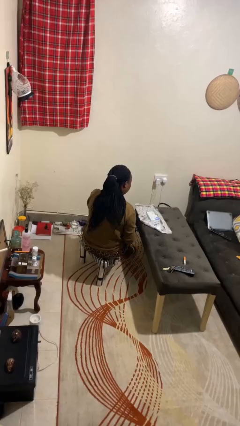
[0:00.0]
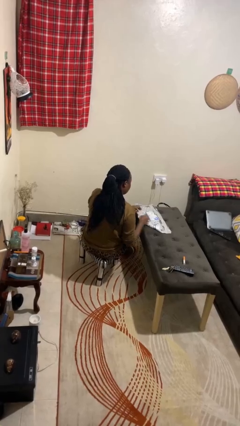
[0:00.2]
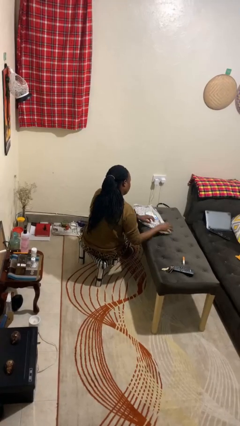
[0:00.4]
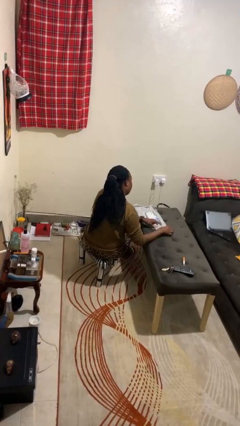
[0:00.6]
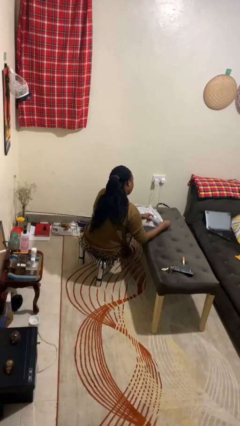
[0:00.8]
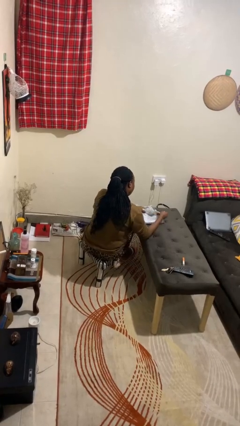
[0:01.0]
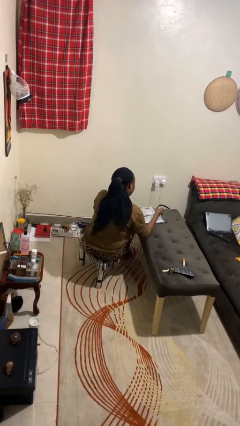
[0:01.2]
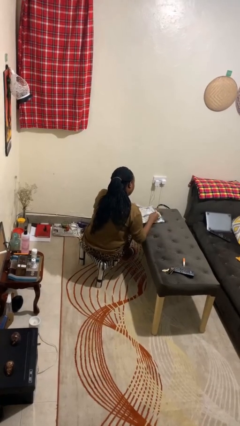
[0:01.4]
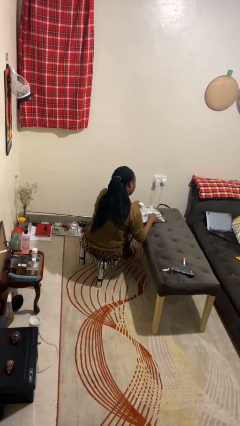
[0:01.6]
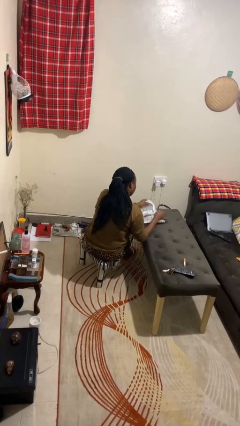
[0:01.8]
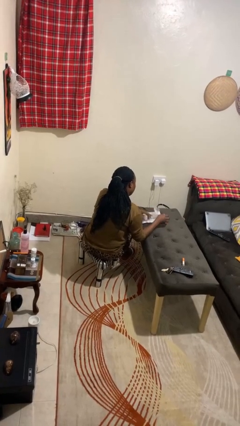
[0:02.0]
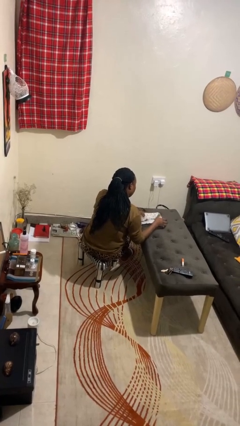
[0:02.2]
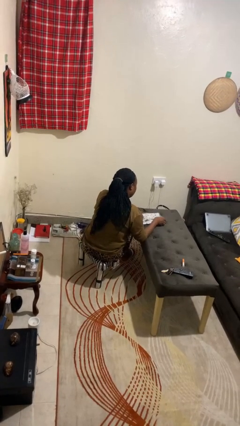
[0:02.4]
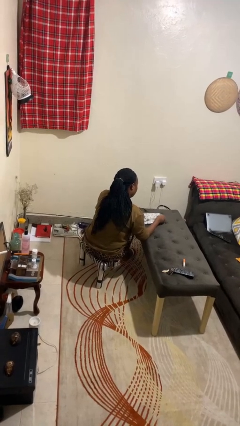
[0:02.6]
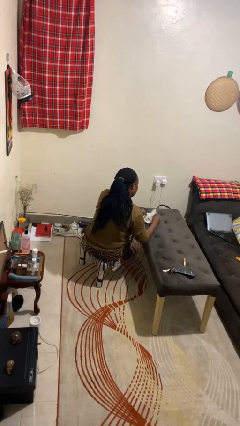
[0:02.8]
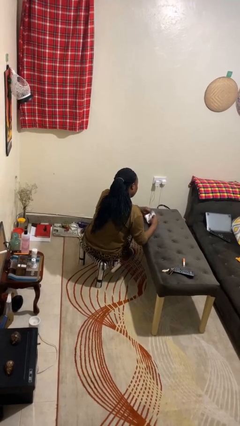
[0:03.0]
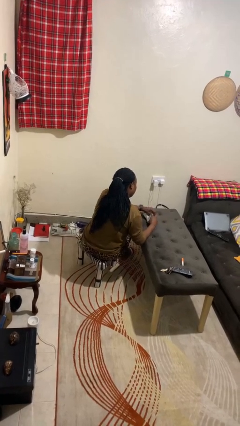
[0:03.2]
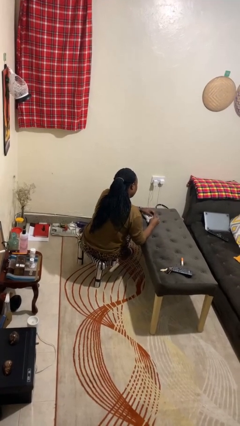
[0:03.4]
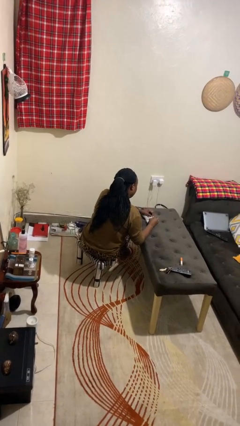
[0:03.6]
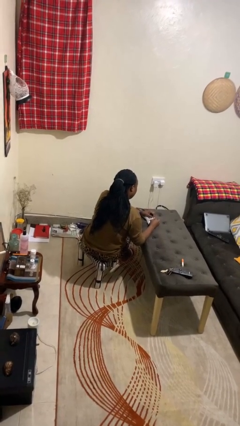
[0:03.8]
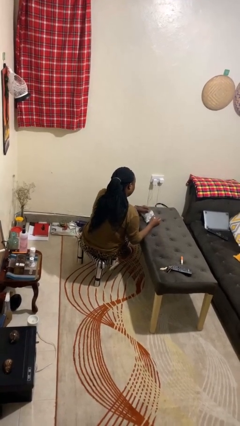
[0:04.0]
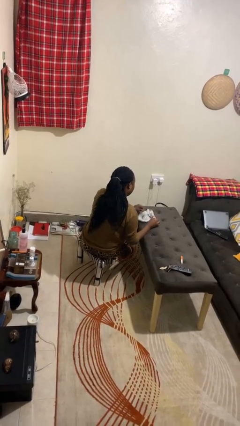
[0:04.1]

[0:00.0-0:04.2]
person wraps box

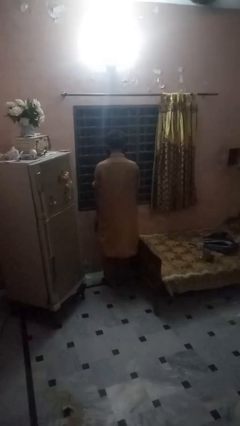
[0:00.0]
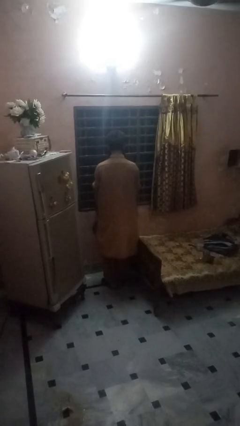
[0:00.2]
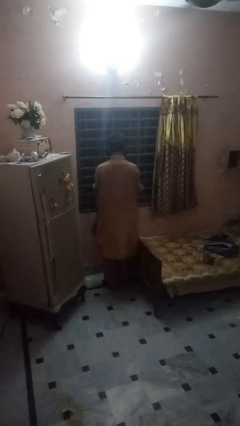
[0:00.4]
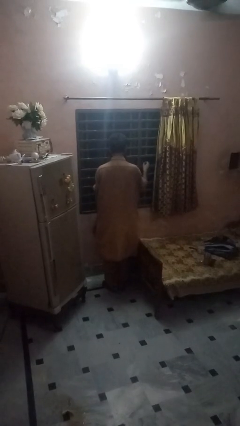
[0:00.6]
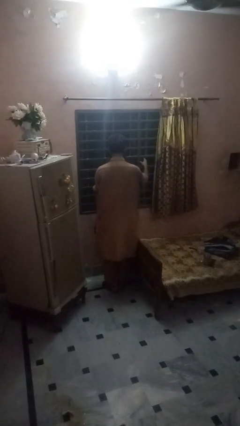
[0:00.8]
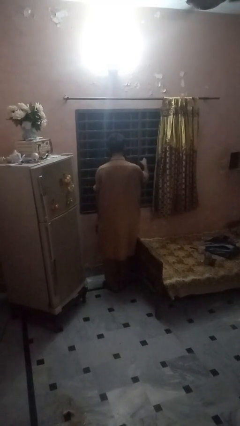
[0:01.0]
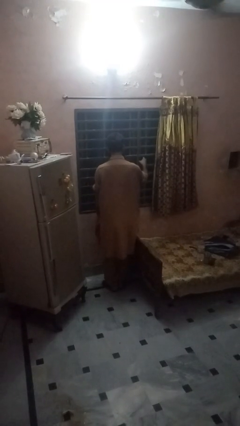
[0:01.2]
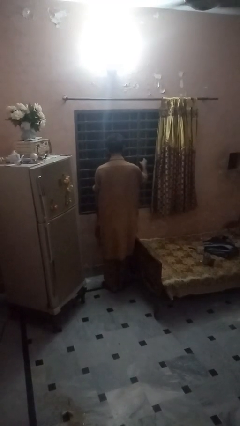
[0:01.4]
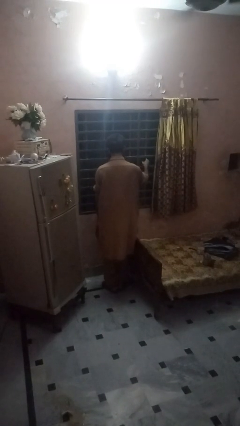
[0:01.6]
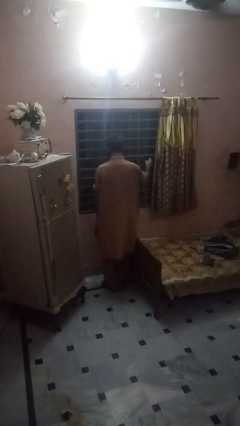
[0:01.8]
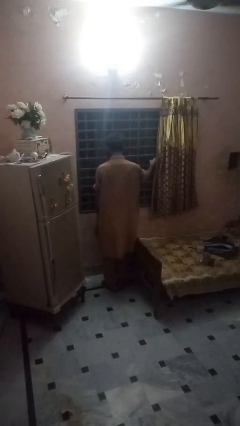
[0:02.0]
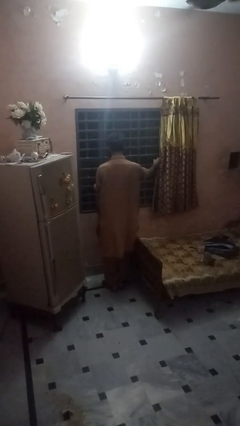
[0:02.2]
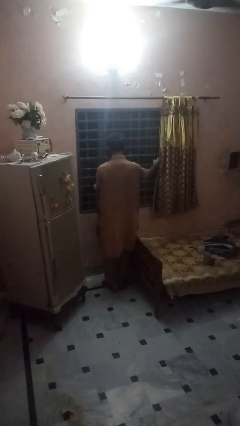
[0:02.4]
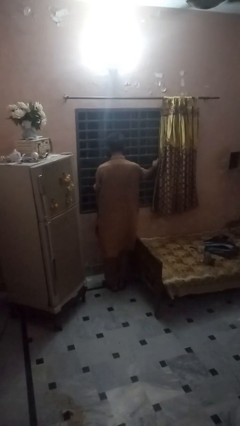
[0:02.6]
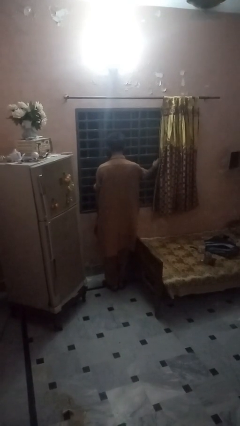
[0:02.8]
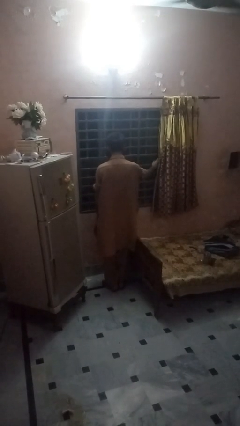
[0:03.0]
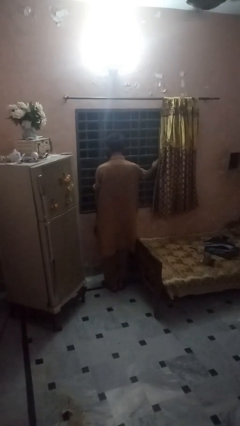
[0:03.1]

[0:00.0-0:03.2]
person opens home window

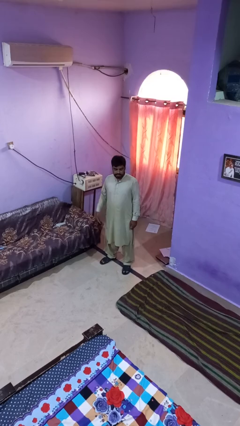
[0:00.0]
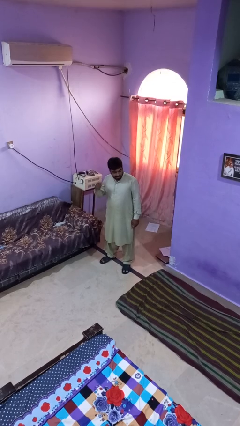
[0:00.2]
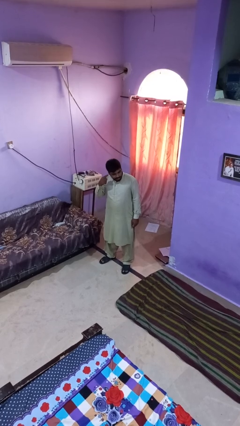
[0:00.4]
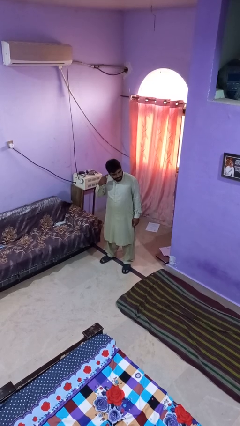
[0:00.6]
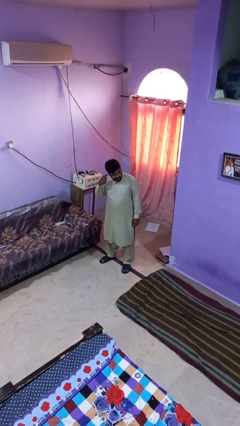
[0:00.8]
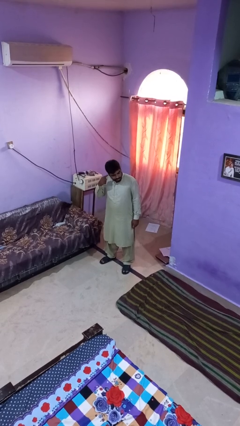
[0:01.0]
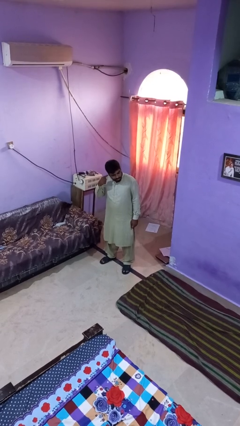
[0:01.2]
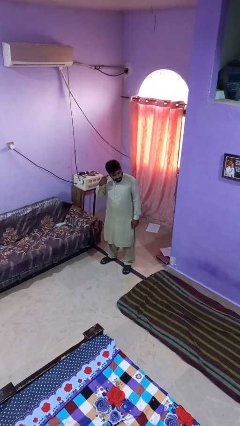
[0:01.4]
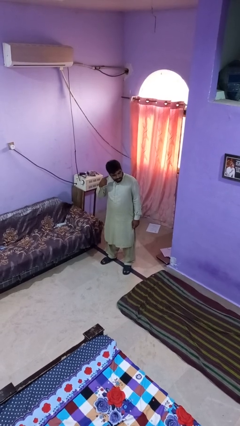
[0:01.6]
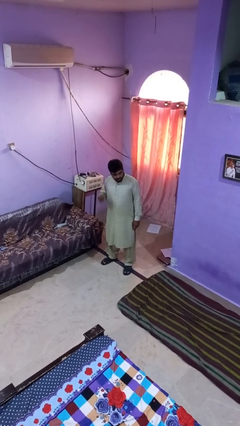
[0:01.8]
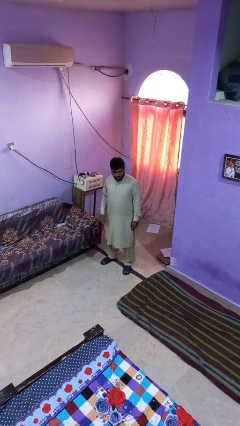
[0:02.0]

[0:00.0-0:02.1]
person gestures listen closely

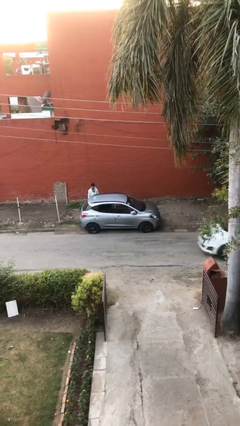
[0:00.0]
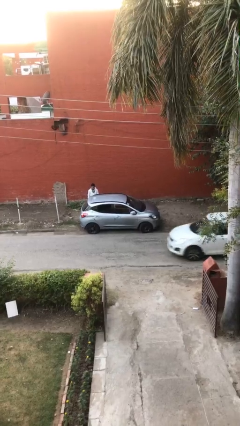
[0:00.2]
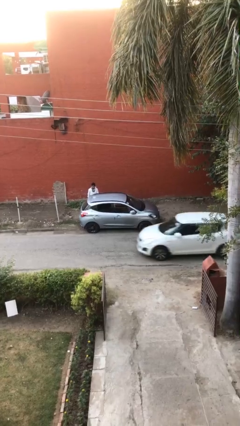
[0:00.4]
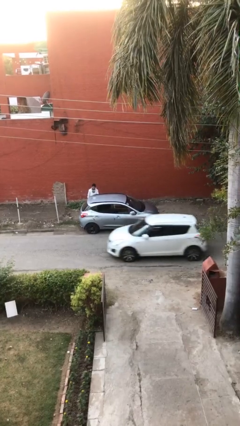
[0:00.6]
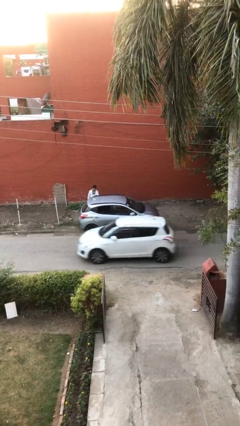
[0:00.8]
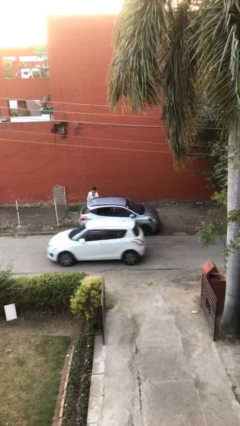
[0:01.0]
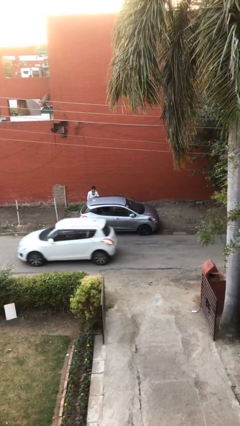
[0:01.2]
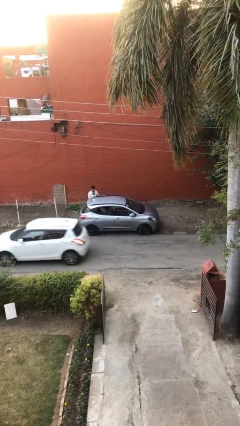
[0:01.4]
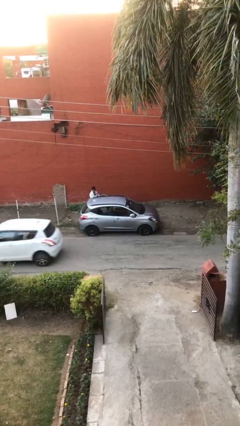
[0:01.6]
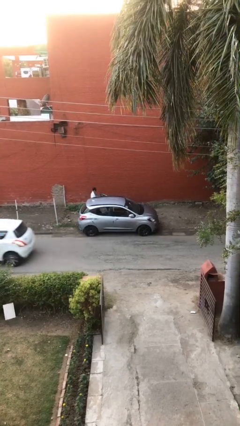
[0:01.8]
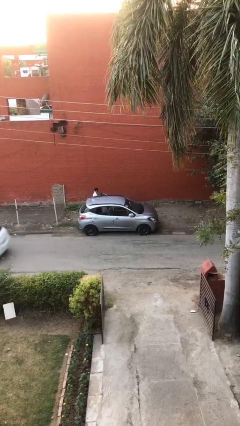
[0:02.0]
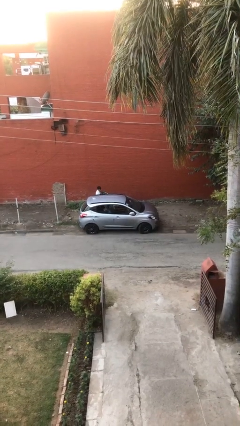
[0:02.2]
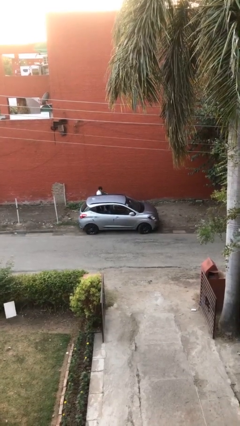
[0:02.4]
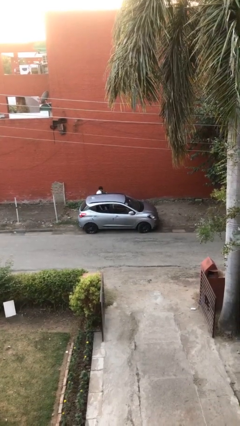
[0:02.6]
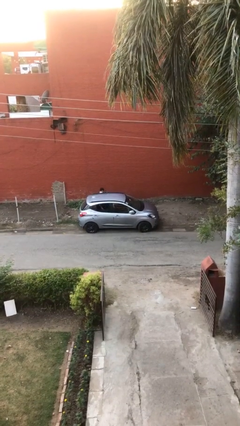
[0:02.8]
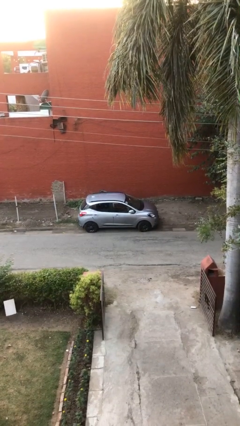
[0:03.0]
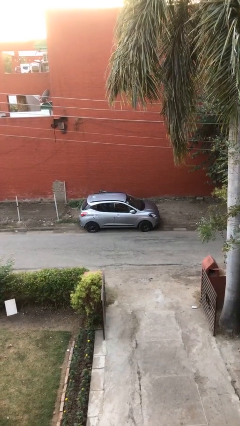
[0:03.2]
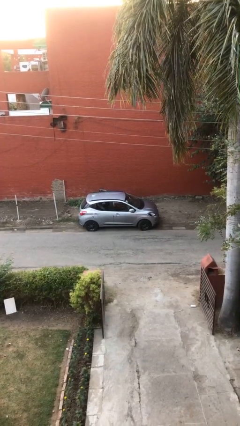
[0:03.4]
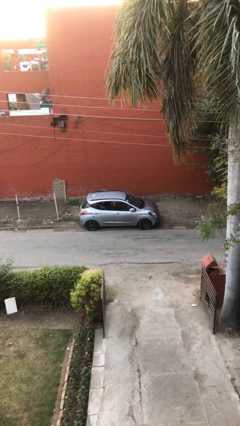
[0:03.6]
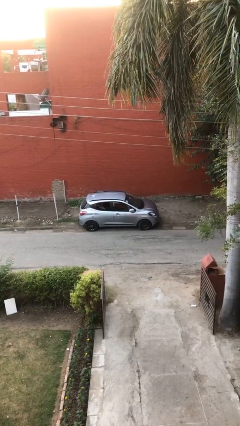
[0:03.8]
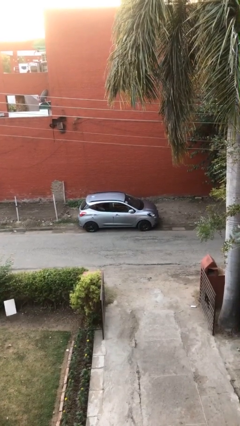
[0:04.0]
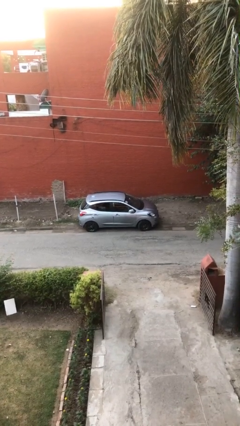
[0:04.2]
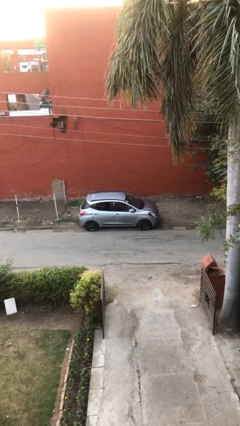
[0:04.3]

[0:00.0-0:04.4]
car picks up person

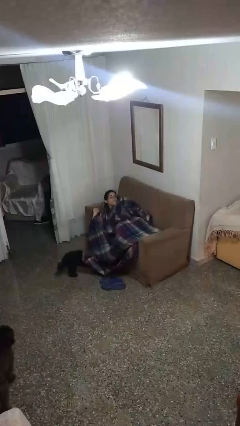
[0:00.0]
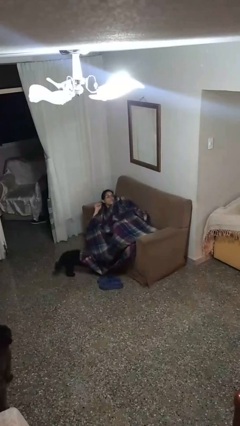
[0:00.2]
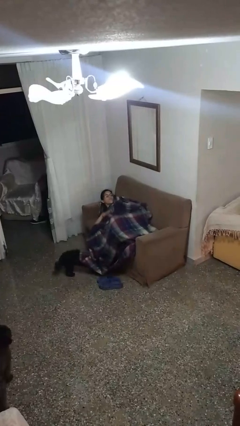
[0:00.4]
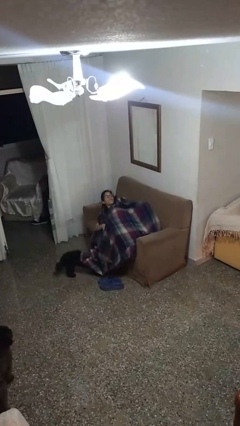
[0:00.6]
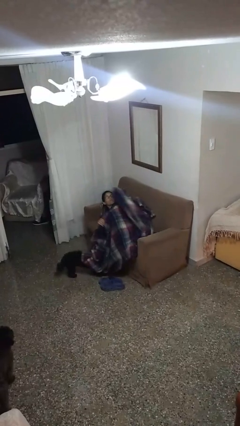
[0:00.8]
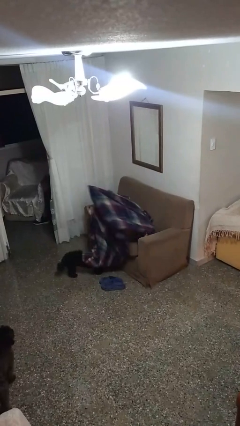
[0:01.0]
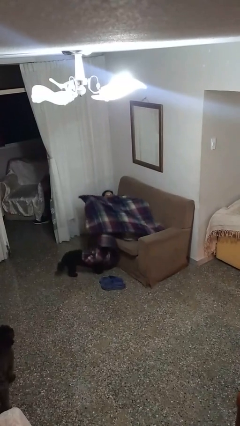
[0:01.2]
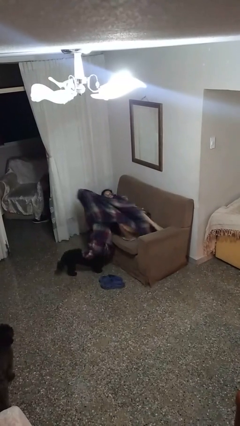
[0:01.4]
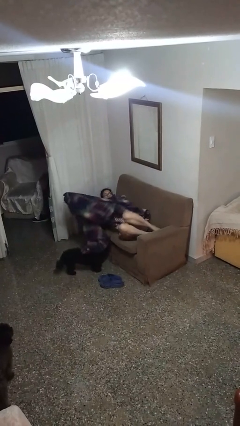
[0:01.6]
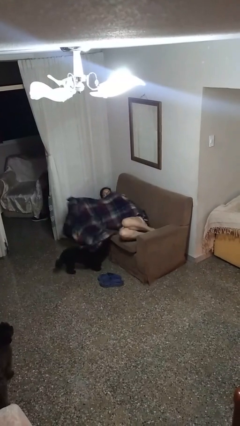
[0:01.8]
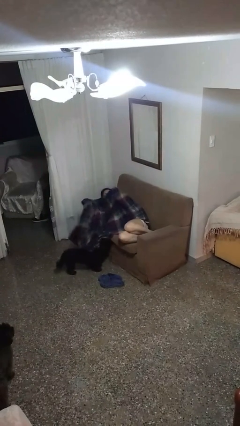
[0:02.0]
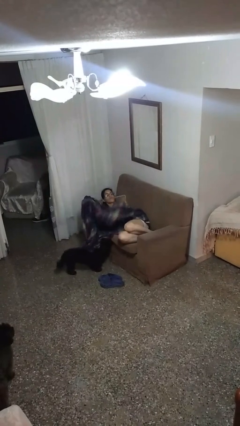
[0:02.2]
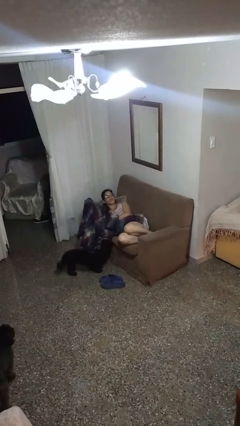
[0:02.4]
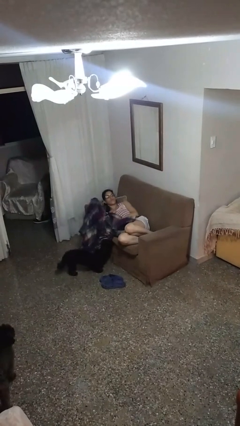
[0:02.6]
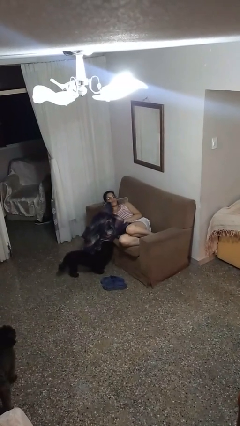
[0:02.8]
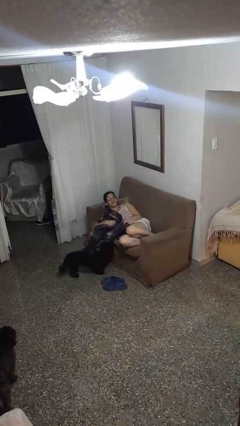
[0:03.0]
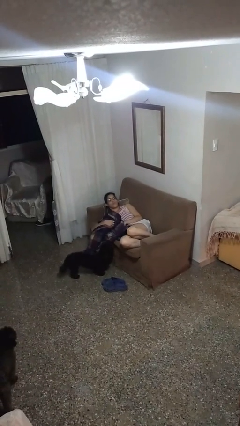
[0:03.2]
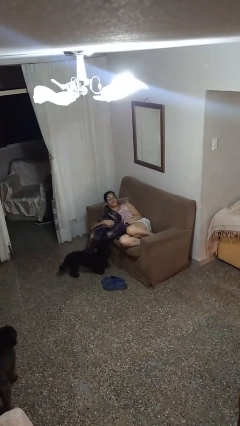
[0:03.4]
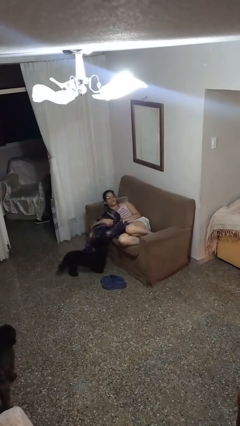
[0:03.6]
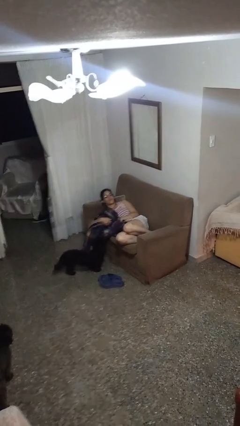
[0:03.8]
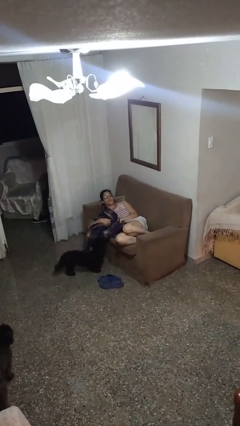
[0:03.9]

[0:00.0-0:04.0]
person uncovers with blanket
